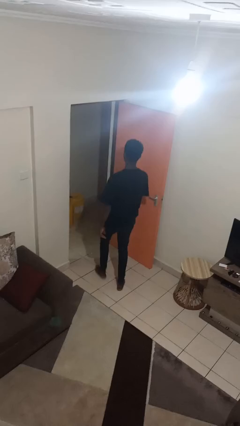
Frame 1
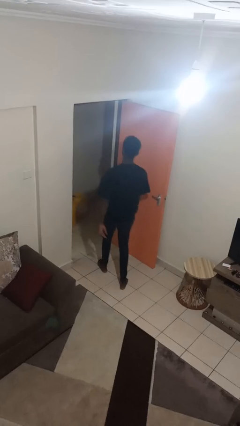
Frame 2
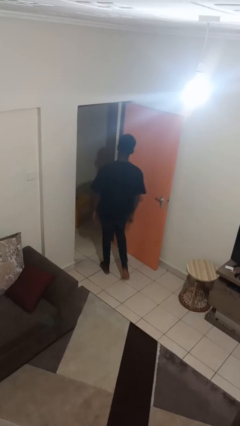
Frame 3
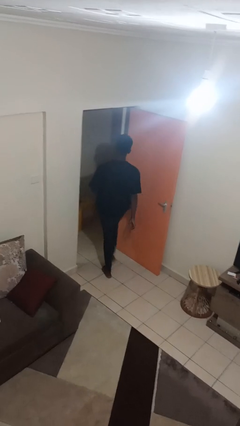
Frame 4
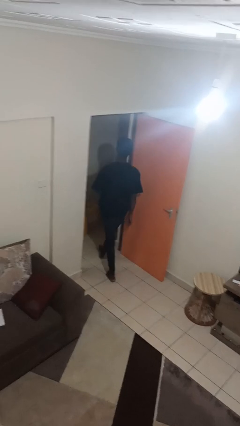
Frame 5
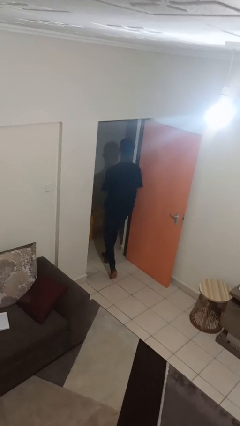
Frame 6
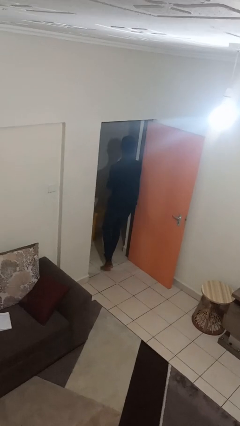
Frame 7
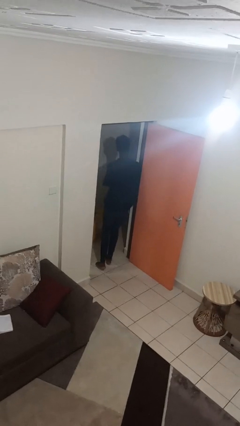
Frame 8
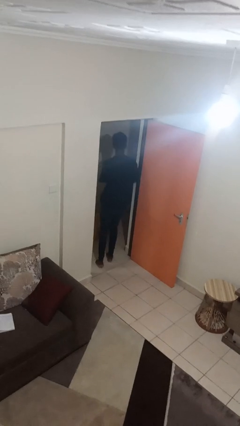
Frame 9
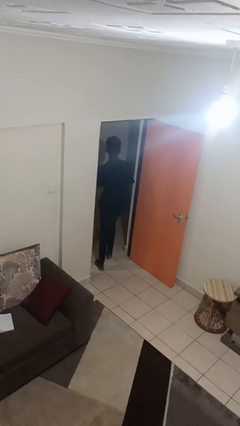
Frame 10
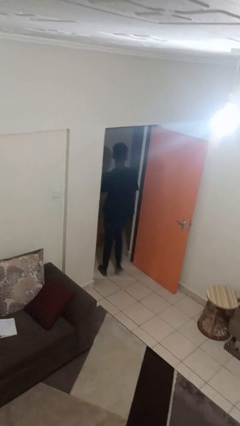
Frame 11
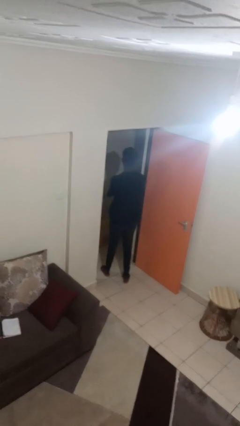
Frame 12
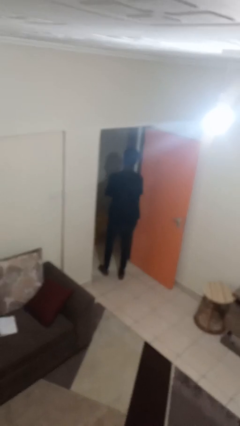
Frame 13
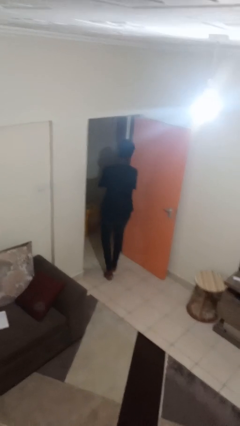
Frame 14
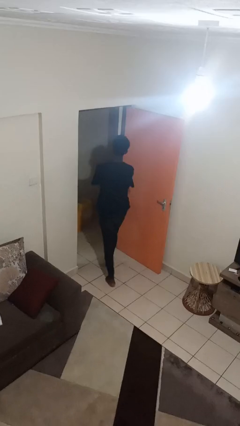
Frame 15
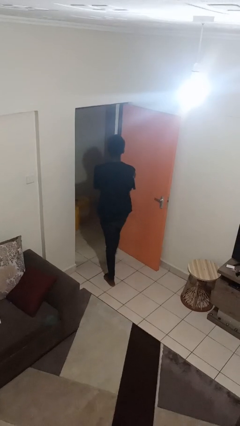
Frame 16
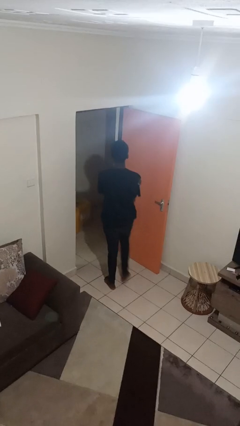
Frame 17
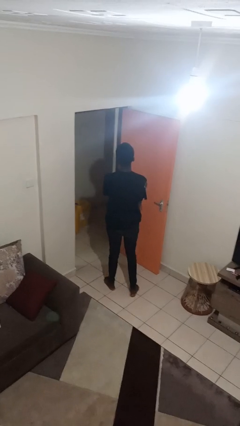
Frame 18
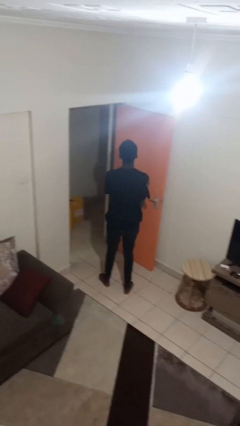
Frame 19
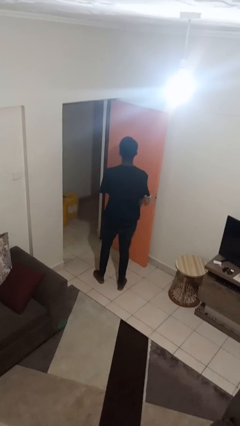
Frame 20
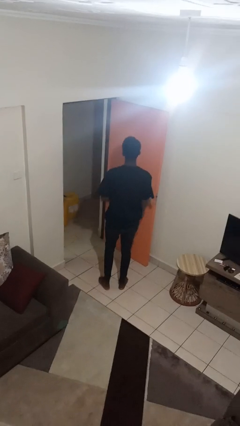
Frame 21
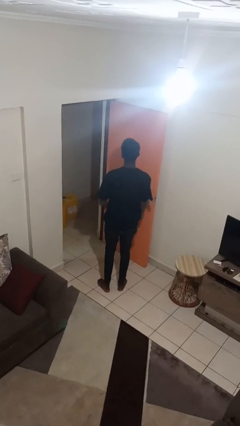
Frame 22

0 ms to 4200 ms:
person bumps into wall

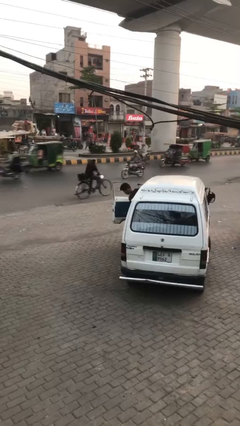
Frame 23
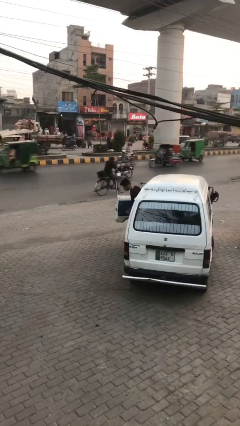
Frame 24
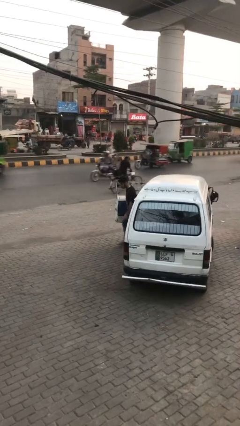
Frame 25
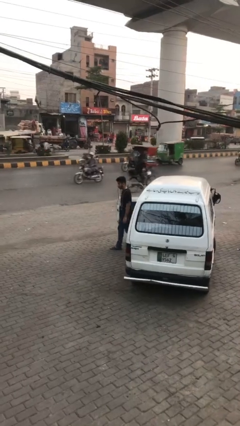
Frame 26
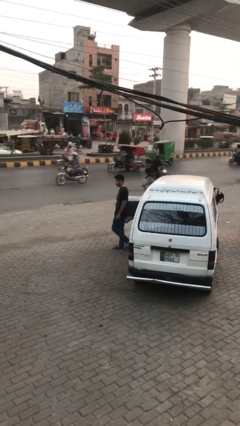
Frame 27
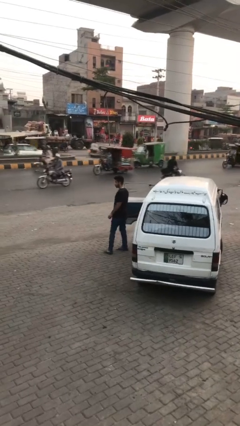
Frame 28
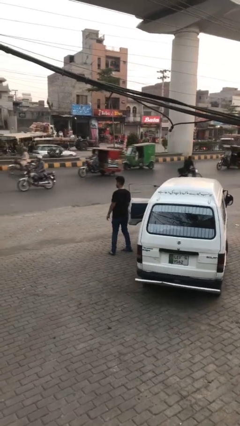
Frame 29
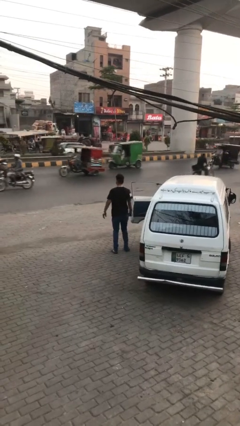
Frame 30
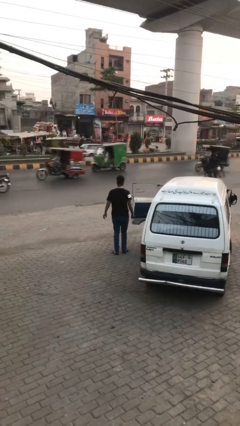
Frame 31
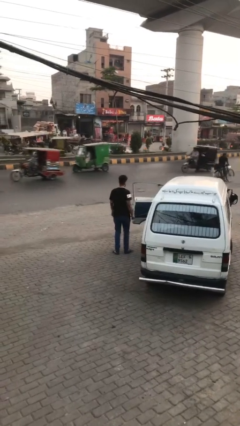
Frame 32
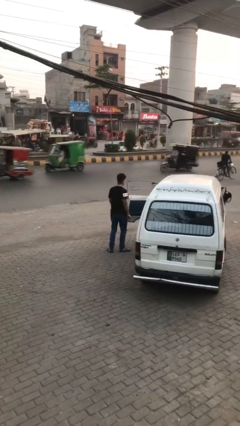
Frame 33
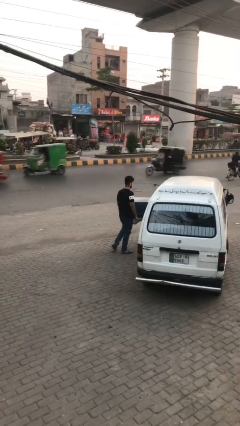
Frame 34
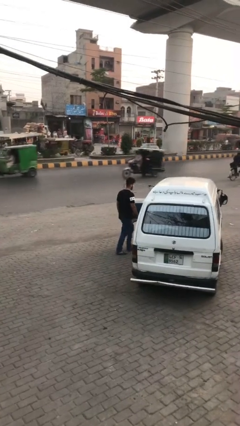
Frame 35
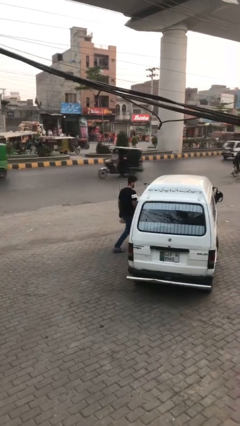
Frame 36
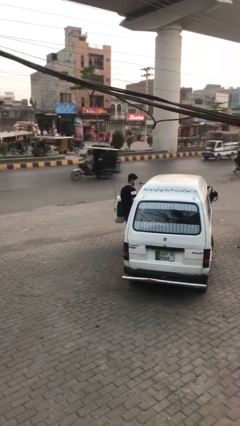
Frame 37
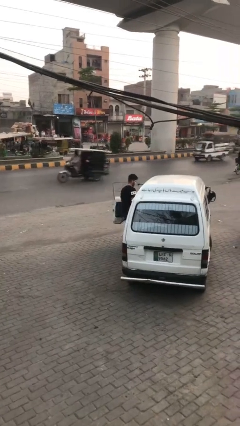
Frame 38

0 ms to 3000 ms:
person exits car

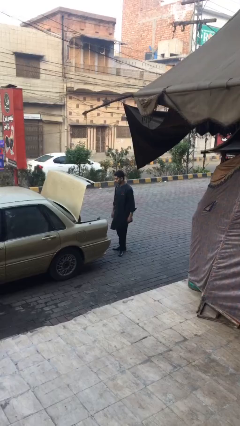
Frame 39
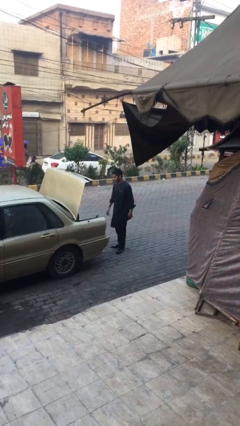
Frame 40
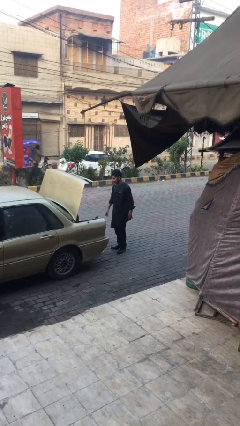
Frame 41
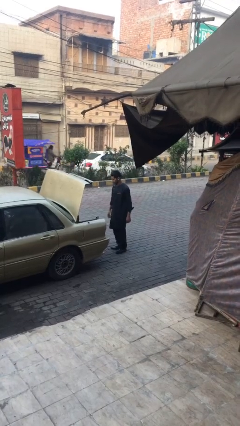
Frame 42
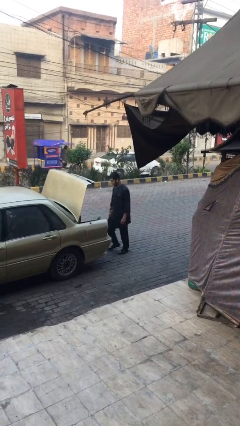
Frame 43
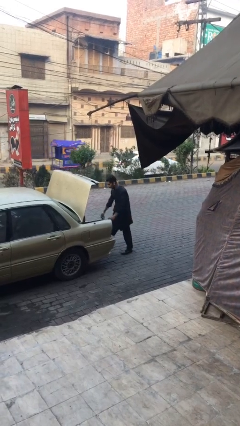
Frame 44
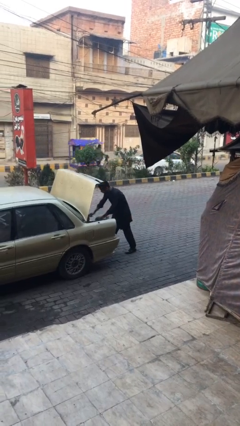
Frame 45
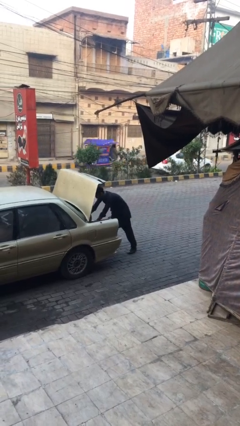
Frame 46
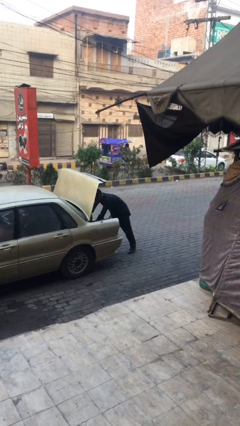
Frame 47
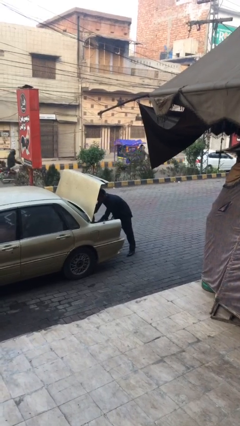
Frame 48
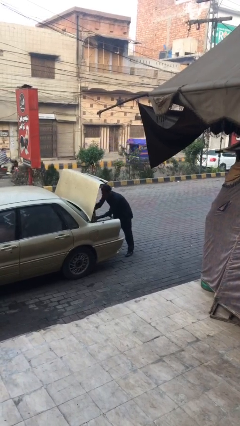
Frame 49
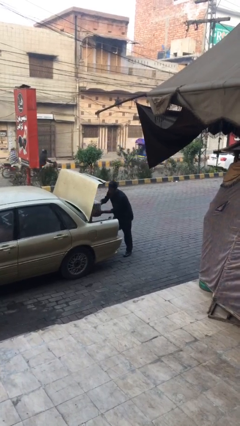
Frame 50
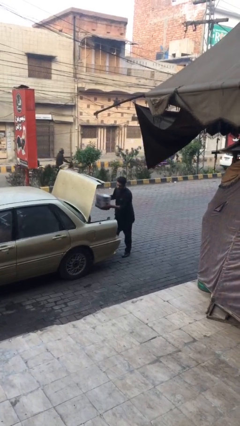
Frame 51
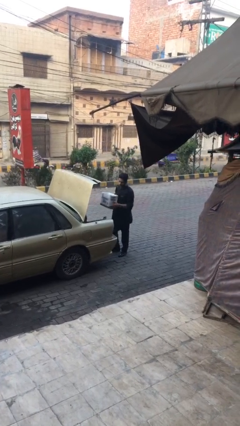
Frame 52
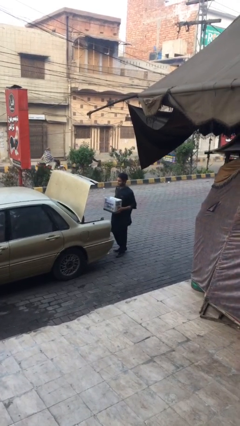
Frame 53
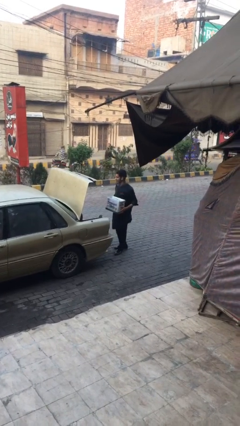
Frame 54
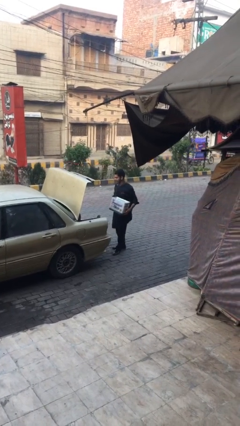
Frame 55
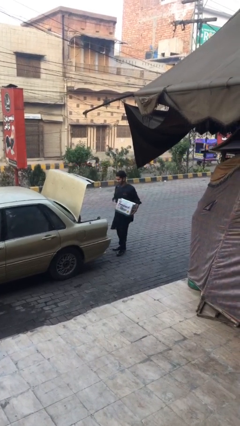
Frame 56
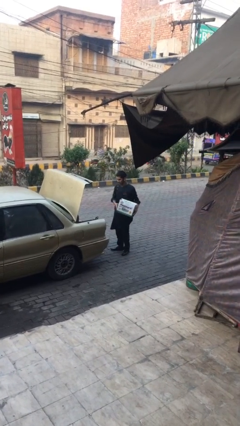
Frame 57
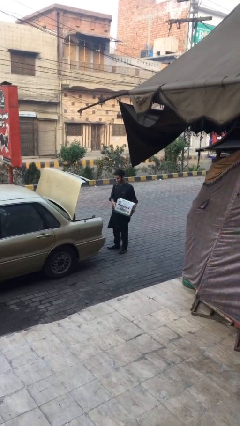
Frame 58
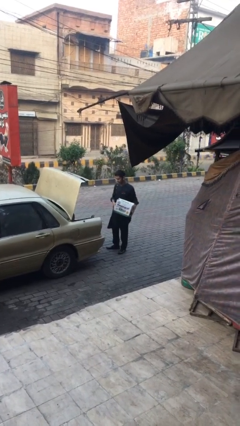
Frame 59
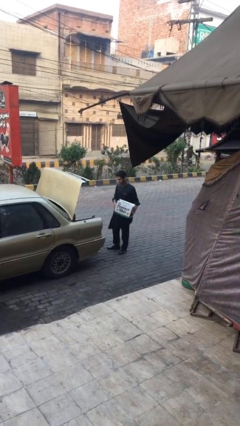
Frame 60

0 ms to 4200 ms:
person unloads car

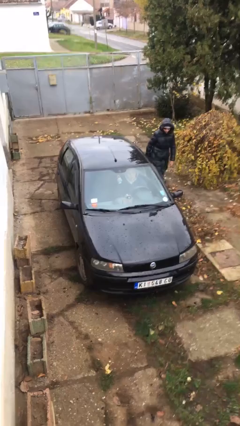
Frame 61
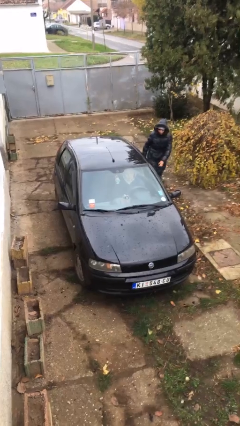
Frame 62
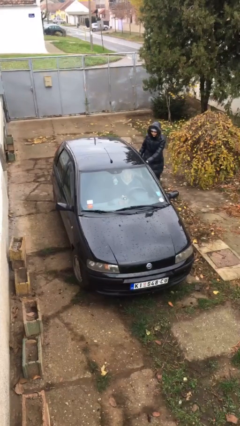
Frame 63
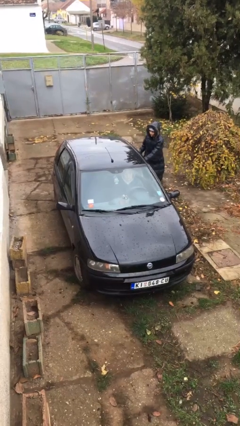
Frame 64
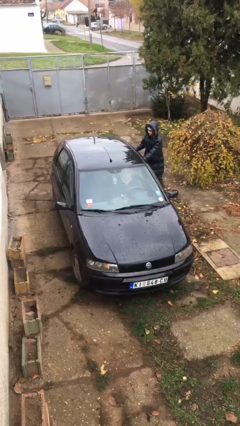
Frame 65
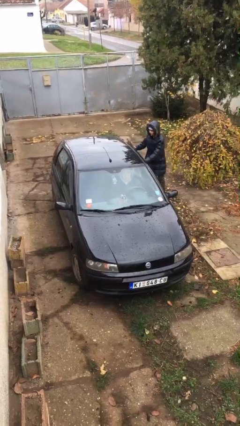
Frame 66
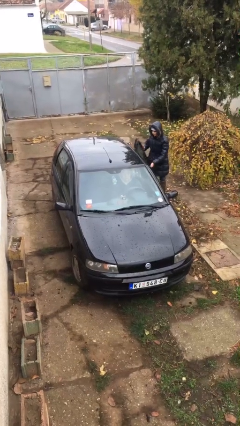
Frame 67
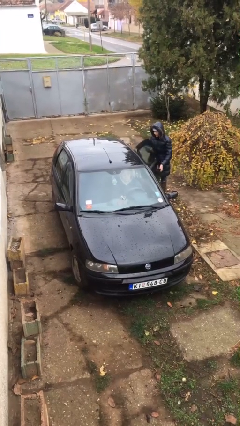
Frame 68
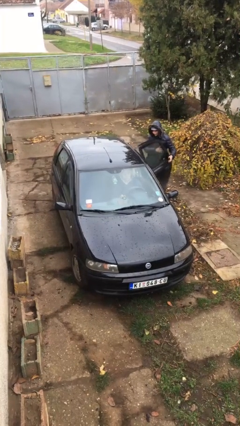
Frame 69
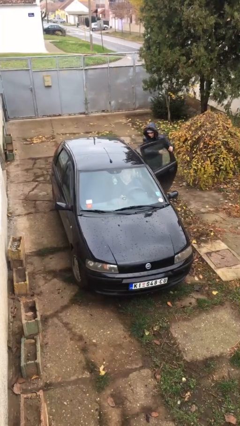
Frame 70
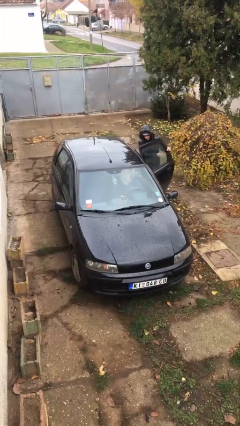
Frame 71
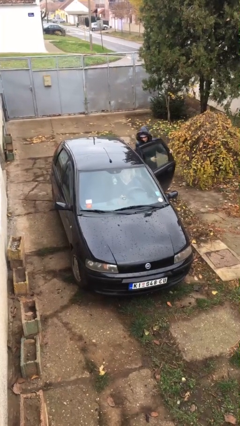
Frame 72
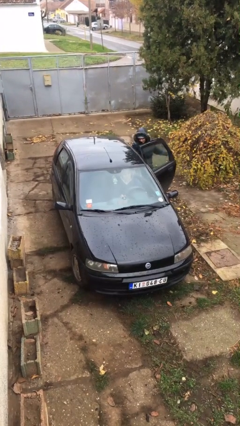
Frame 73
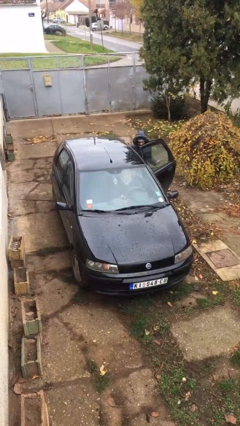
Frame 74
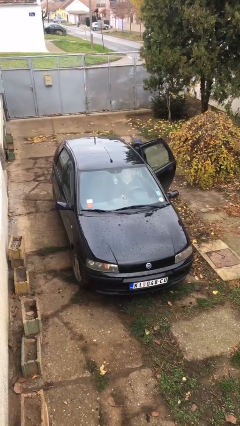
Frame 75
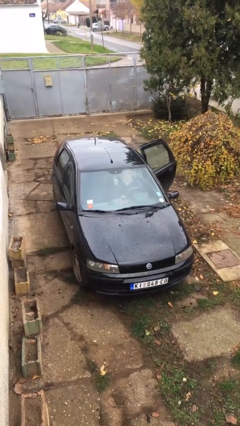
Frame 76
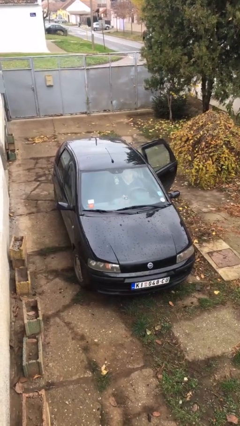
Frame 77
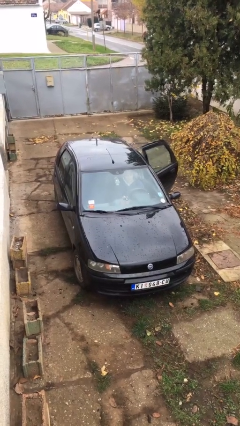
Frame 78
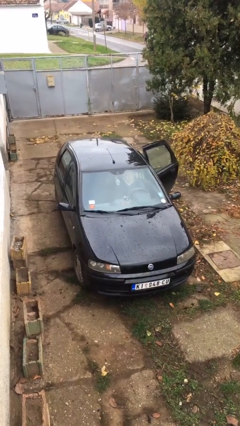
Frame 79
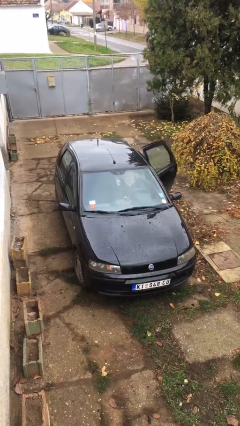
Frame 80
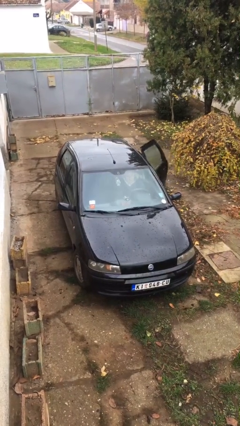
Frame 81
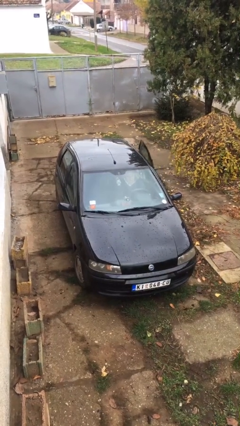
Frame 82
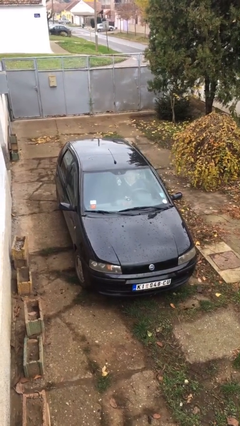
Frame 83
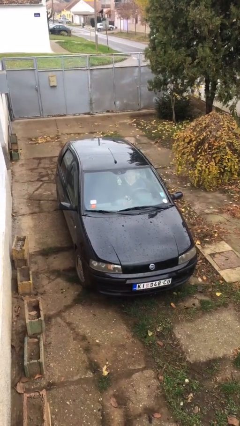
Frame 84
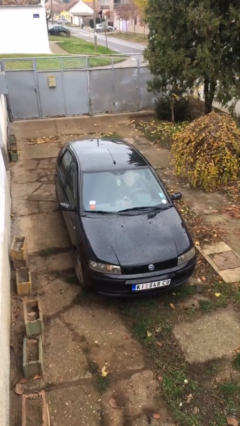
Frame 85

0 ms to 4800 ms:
car picks up person

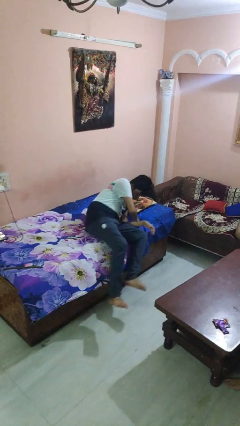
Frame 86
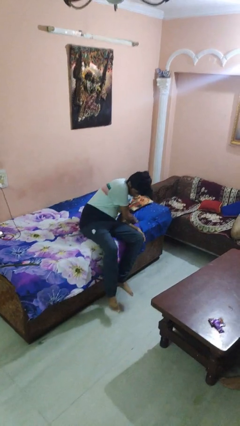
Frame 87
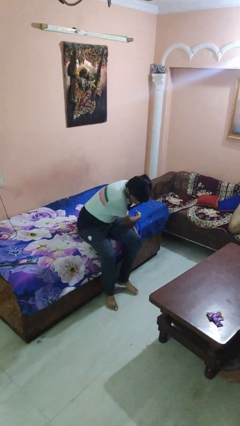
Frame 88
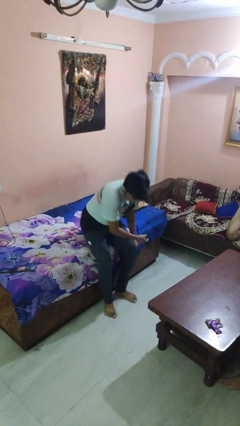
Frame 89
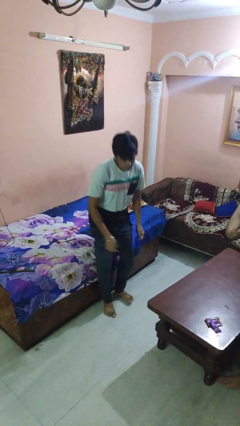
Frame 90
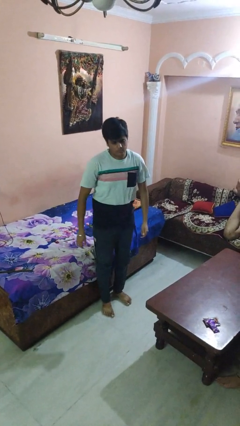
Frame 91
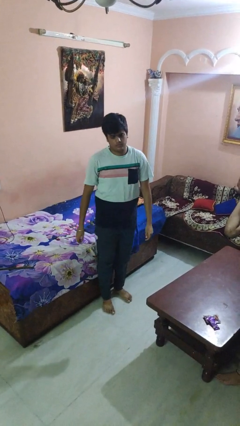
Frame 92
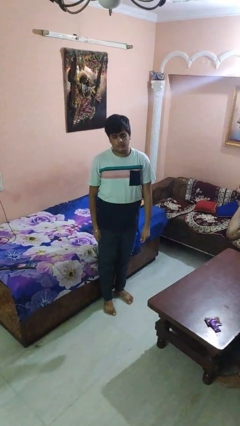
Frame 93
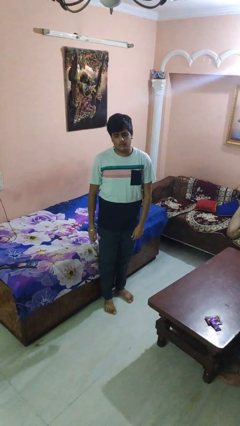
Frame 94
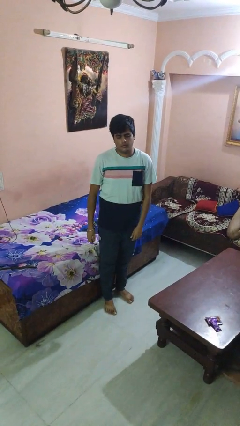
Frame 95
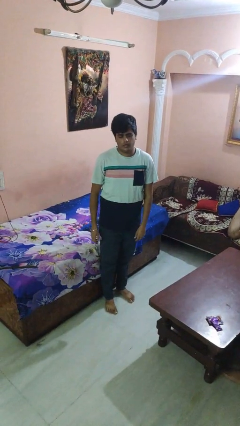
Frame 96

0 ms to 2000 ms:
person stands up
